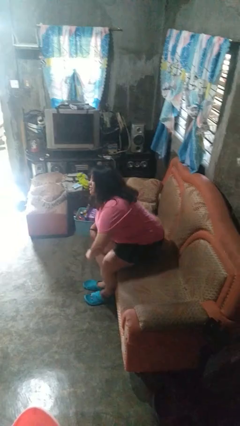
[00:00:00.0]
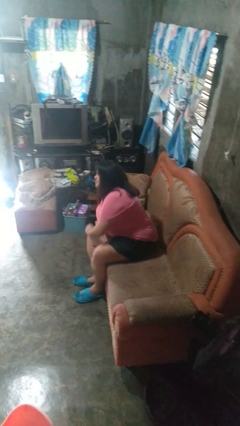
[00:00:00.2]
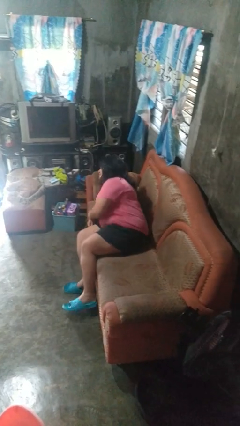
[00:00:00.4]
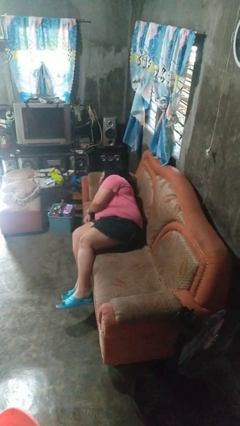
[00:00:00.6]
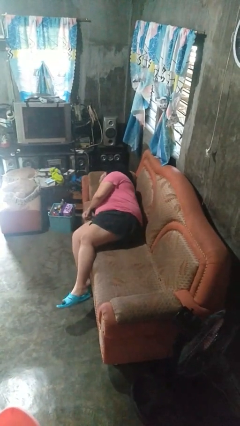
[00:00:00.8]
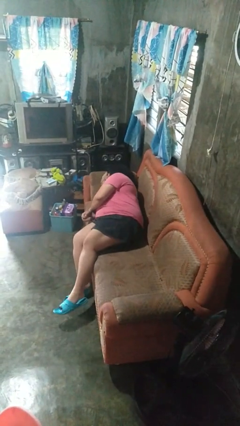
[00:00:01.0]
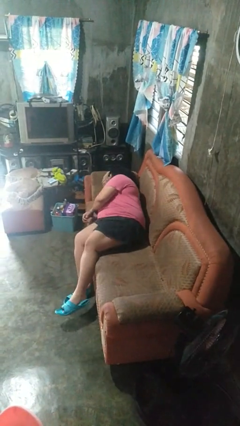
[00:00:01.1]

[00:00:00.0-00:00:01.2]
person lies down on couch

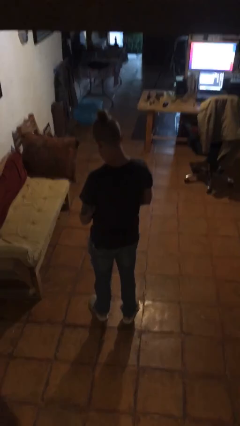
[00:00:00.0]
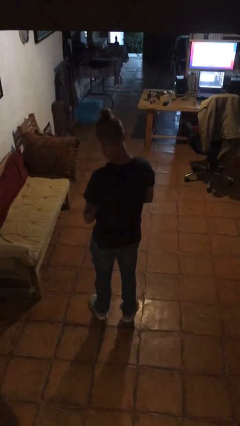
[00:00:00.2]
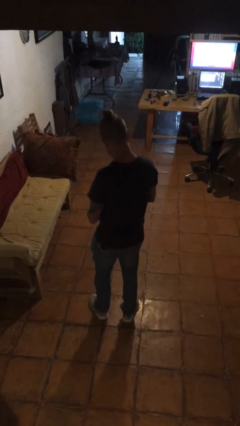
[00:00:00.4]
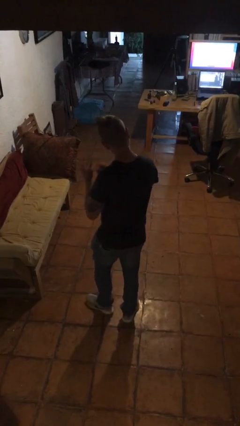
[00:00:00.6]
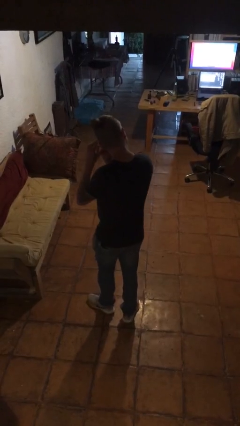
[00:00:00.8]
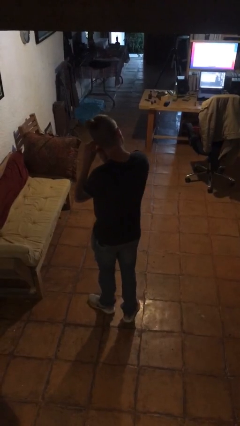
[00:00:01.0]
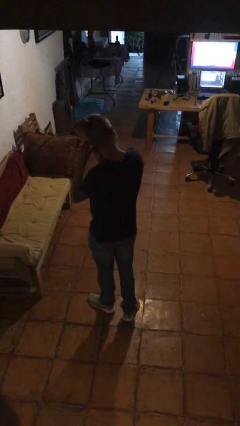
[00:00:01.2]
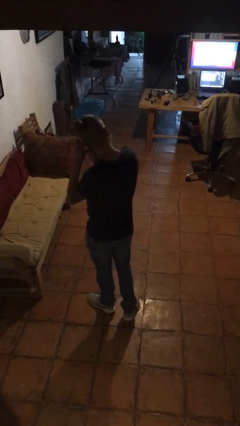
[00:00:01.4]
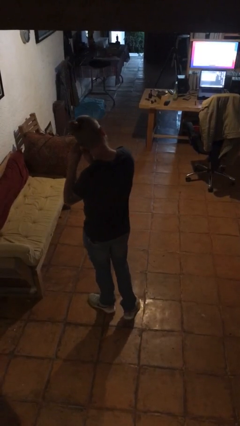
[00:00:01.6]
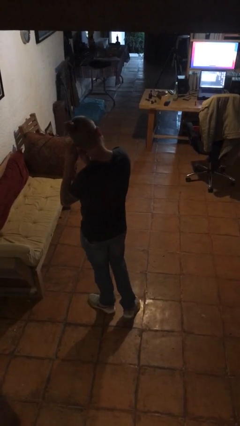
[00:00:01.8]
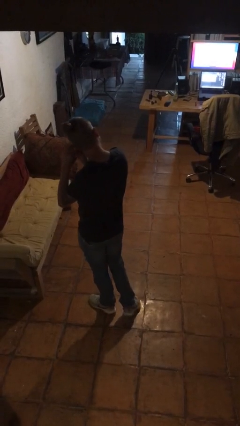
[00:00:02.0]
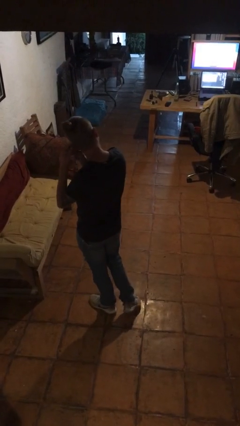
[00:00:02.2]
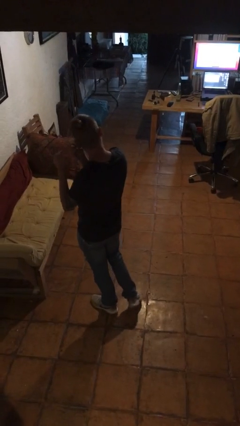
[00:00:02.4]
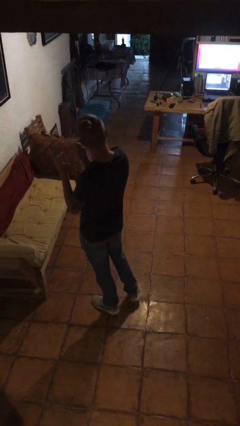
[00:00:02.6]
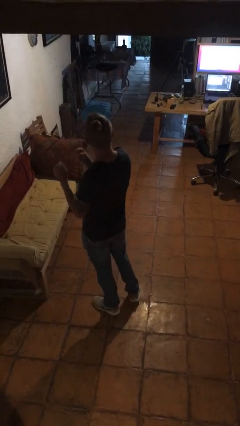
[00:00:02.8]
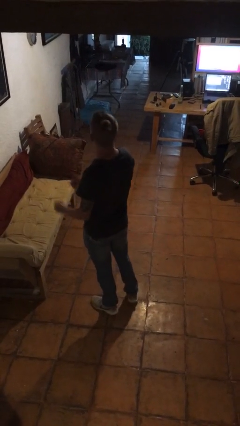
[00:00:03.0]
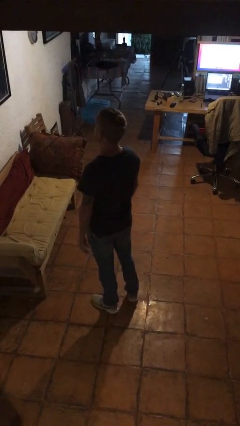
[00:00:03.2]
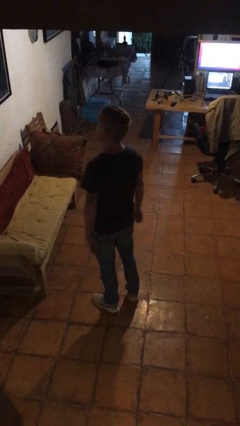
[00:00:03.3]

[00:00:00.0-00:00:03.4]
person puts on earrings

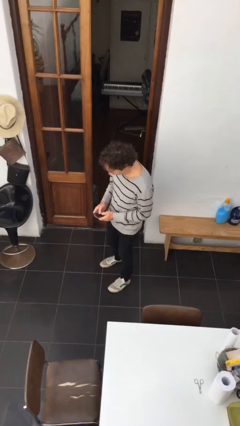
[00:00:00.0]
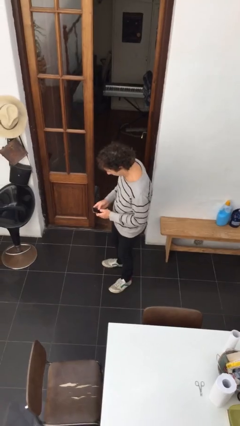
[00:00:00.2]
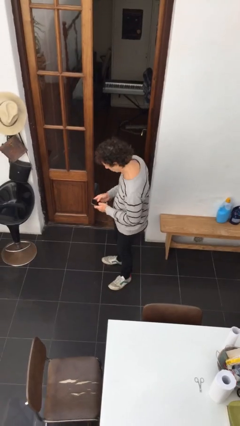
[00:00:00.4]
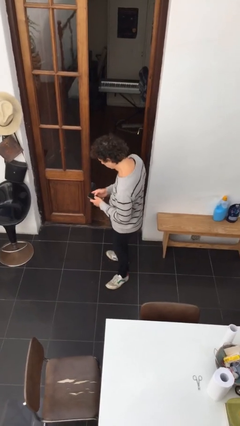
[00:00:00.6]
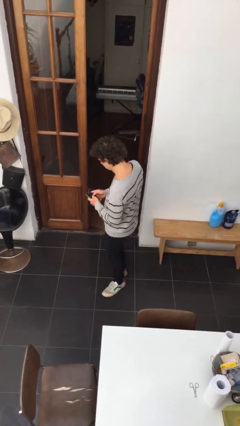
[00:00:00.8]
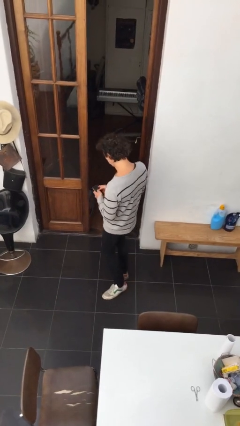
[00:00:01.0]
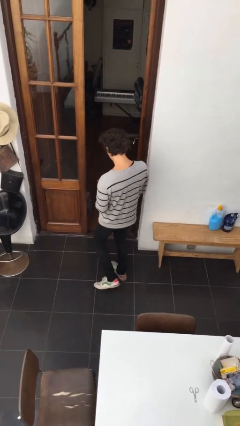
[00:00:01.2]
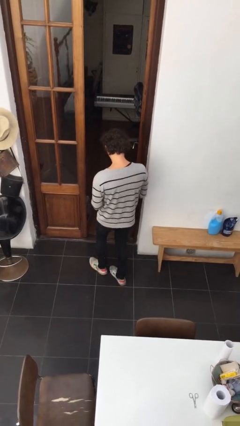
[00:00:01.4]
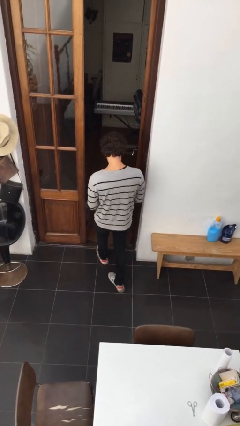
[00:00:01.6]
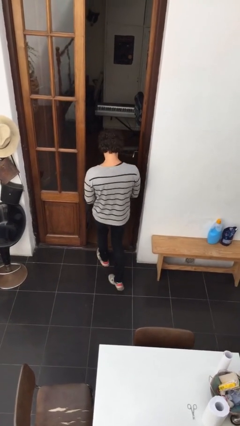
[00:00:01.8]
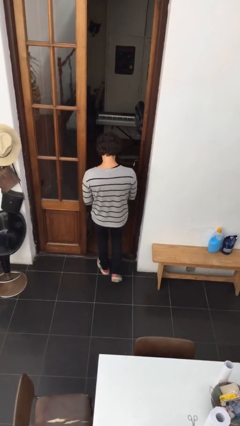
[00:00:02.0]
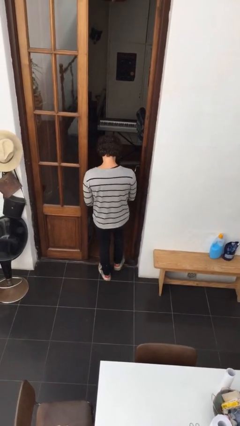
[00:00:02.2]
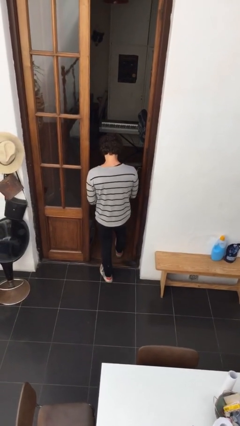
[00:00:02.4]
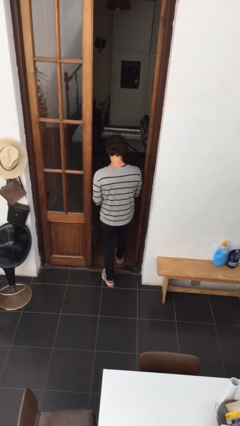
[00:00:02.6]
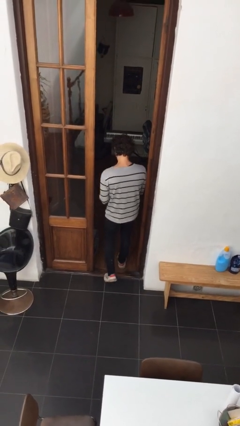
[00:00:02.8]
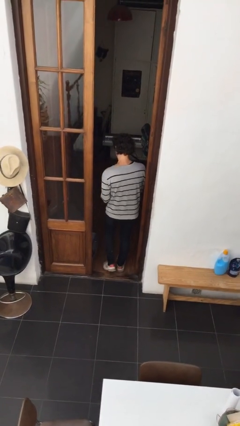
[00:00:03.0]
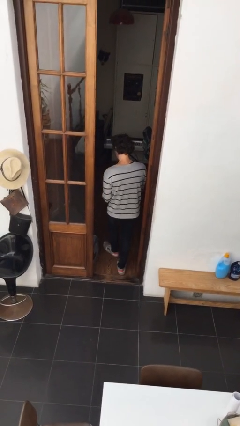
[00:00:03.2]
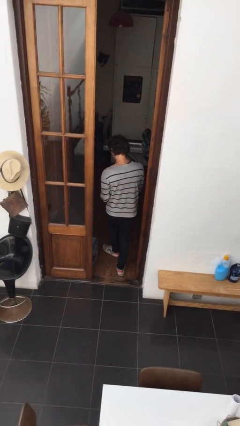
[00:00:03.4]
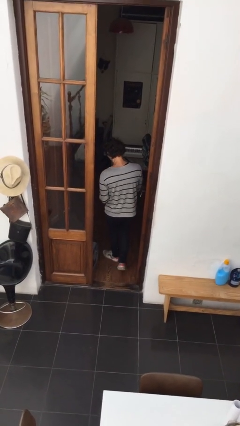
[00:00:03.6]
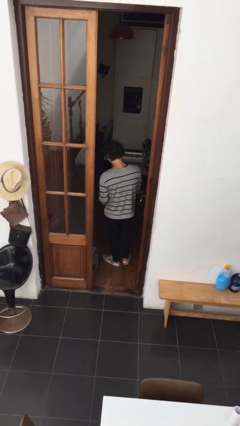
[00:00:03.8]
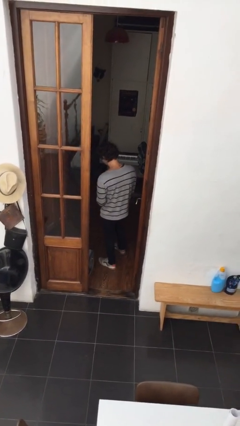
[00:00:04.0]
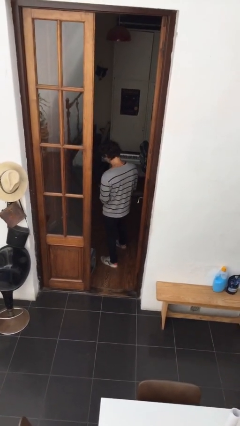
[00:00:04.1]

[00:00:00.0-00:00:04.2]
person exits scene through structure

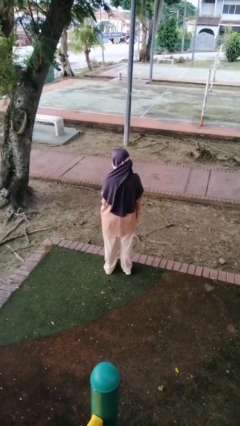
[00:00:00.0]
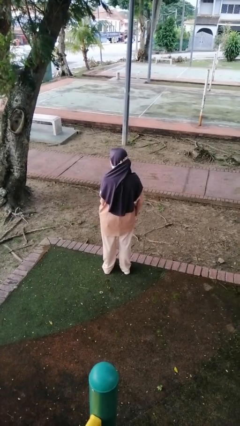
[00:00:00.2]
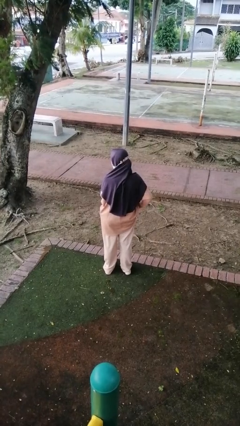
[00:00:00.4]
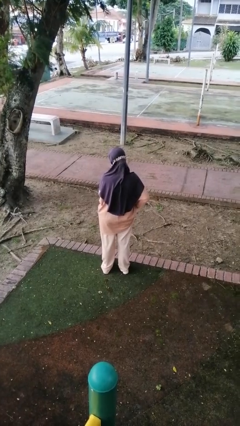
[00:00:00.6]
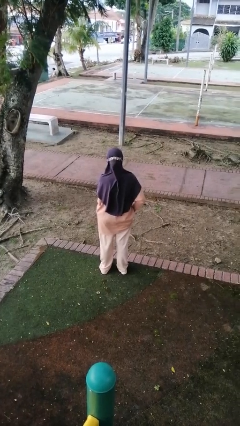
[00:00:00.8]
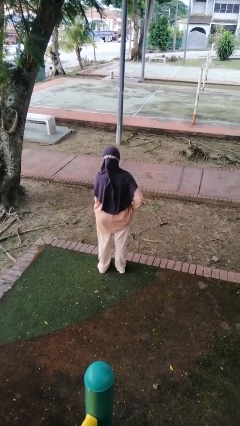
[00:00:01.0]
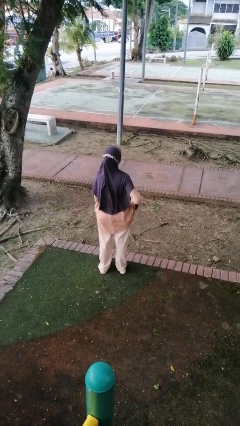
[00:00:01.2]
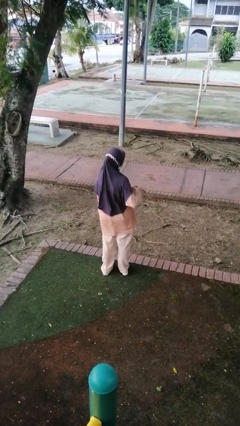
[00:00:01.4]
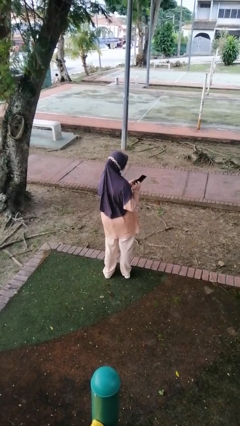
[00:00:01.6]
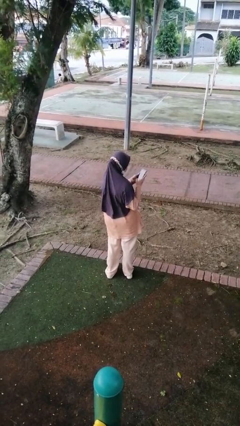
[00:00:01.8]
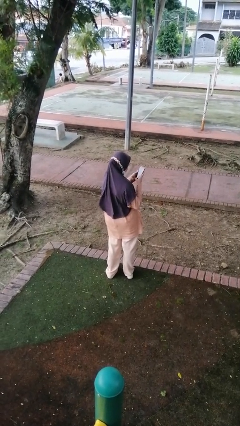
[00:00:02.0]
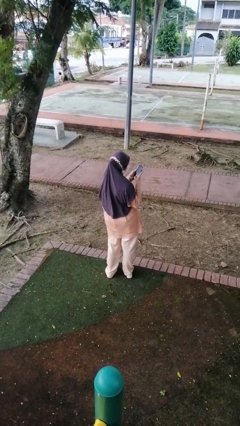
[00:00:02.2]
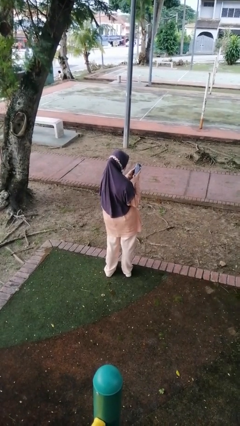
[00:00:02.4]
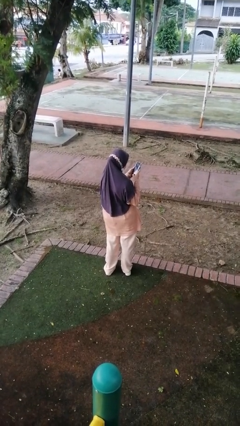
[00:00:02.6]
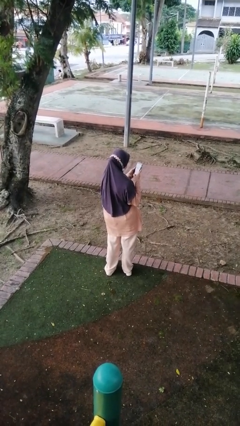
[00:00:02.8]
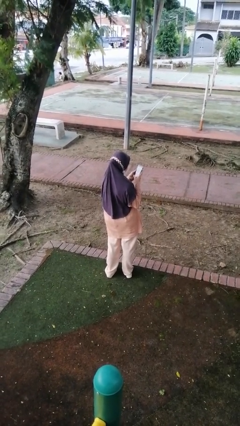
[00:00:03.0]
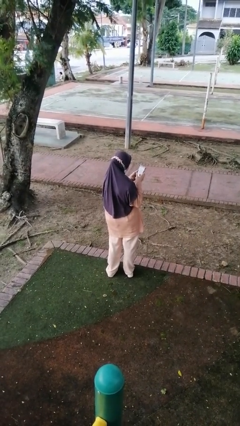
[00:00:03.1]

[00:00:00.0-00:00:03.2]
person takes phone from pocket

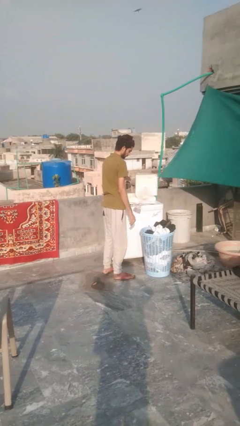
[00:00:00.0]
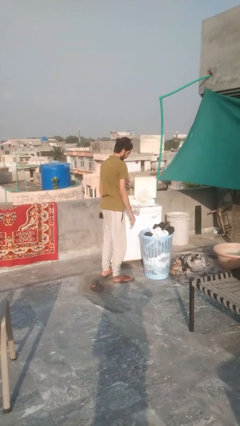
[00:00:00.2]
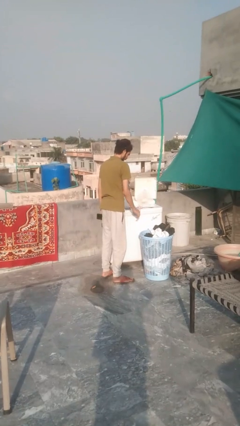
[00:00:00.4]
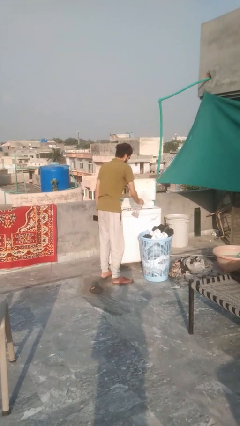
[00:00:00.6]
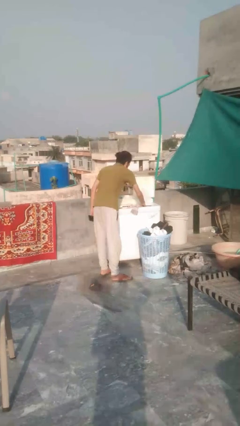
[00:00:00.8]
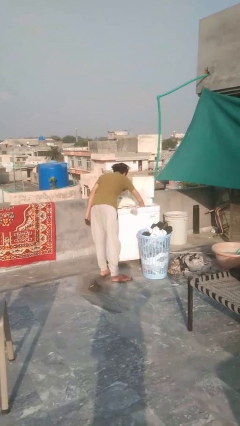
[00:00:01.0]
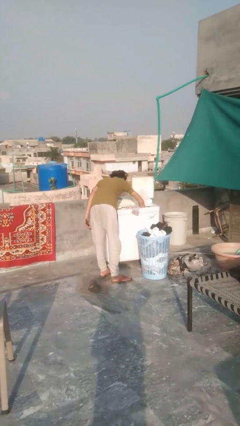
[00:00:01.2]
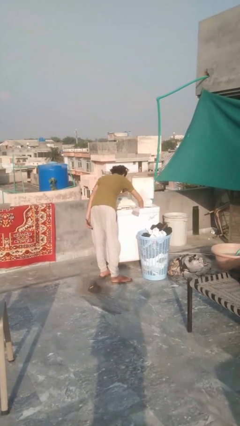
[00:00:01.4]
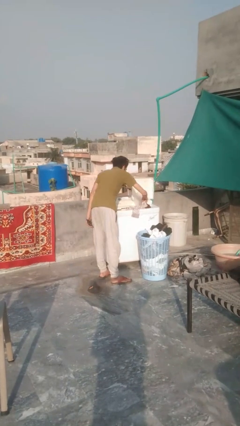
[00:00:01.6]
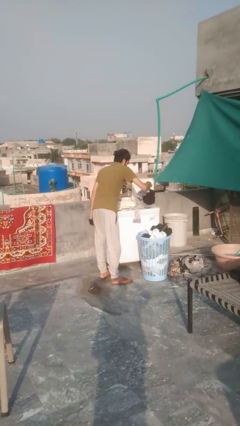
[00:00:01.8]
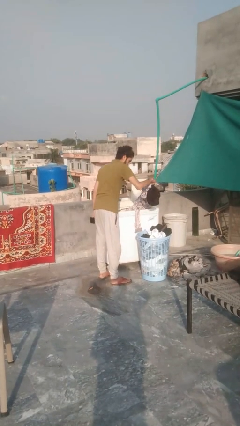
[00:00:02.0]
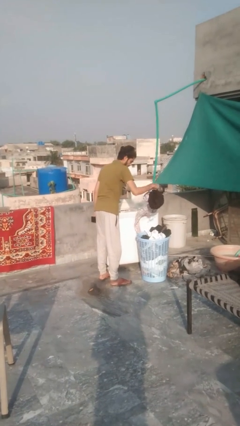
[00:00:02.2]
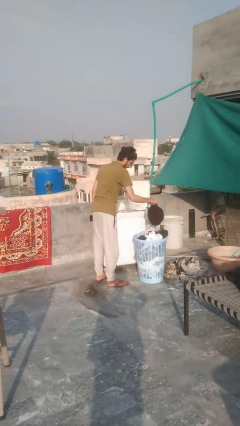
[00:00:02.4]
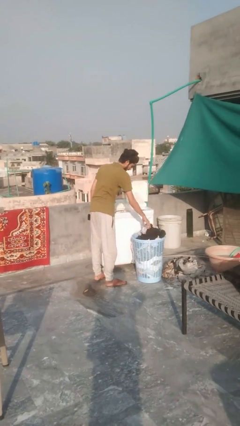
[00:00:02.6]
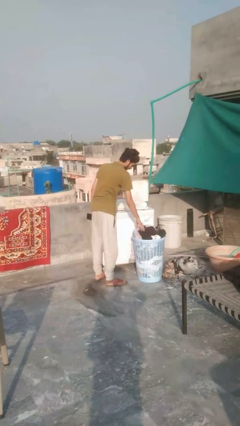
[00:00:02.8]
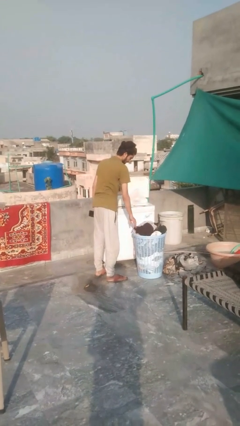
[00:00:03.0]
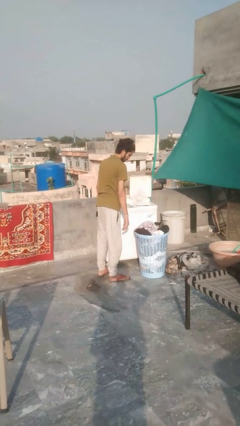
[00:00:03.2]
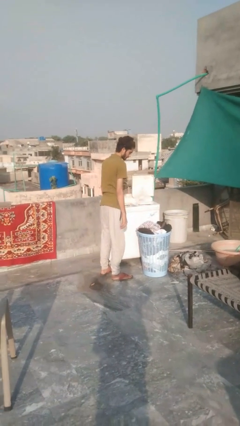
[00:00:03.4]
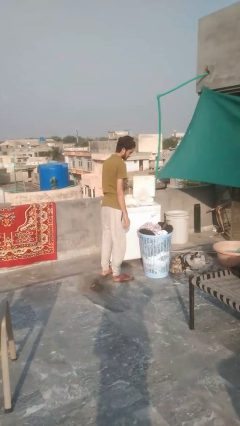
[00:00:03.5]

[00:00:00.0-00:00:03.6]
person unloads clotheswasher

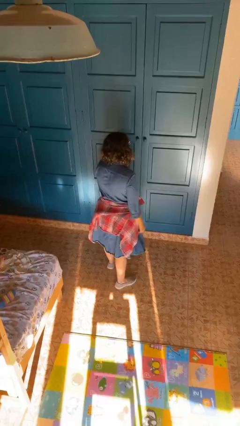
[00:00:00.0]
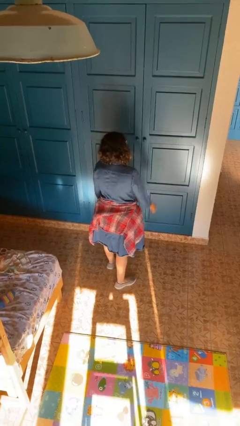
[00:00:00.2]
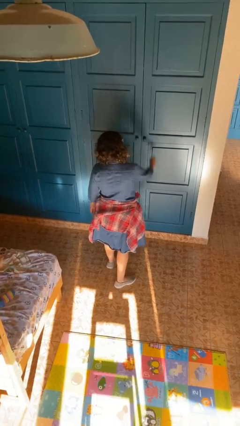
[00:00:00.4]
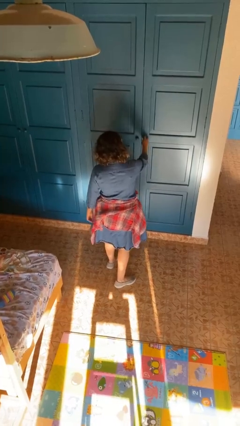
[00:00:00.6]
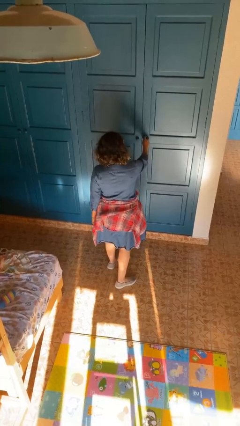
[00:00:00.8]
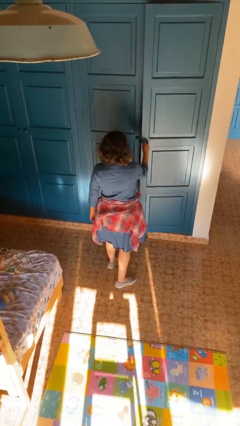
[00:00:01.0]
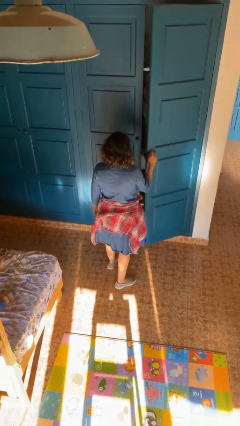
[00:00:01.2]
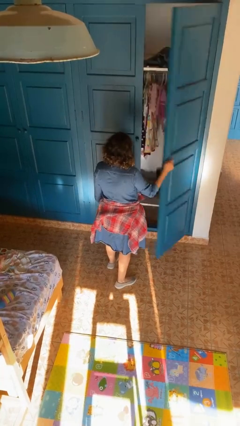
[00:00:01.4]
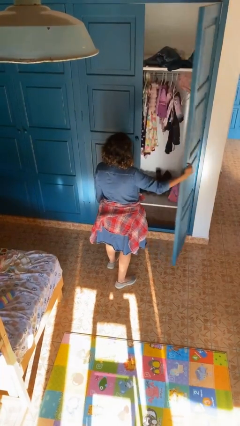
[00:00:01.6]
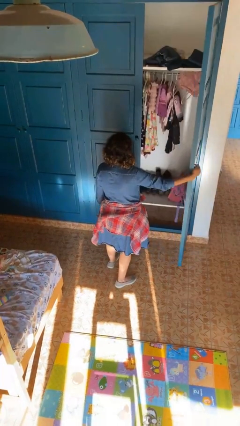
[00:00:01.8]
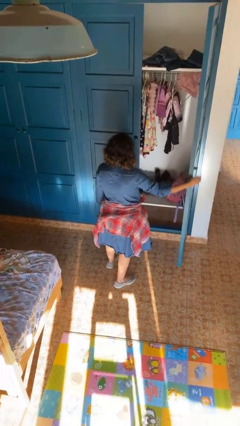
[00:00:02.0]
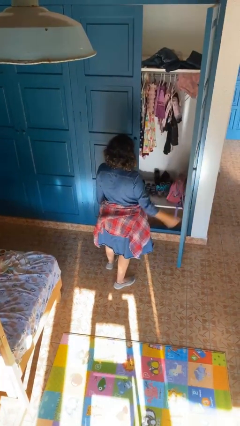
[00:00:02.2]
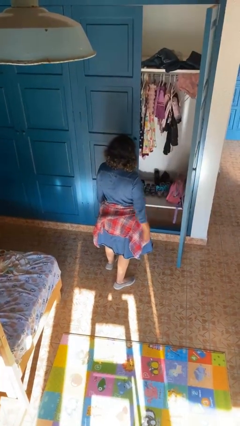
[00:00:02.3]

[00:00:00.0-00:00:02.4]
person opens closet door
